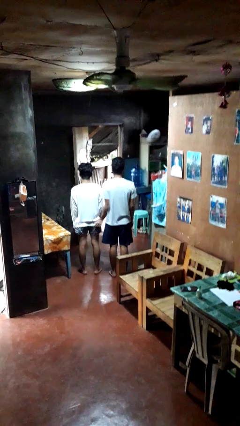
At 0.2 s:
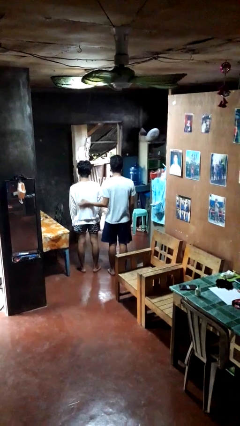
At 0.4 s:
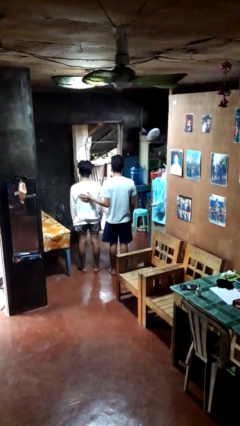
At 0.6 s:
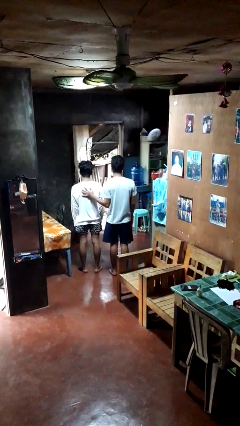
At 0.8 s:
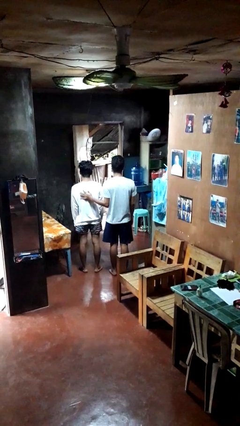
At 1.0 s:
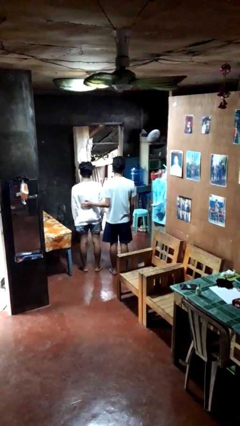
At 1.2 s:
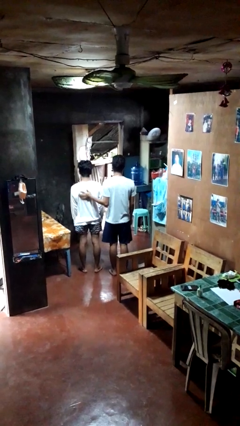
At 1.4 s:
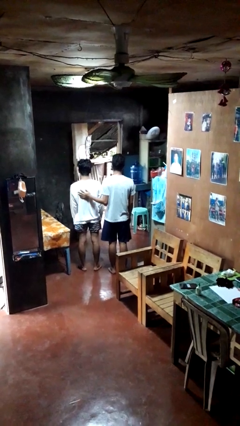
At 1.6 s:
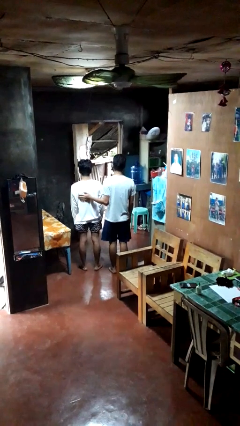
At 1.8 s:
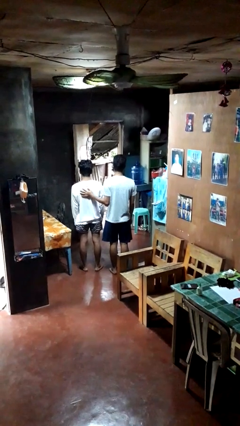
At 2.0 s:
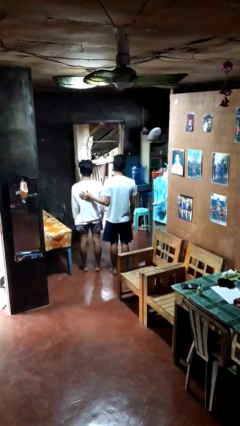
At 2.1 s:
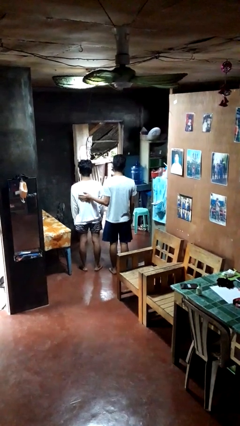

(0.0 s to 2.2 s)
person touches back of person

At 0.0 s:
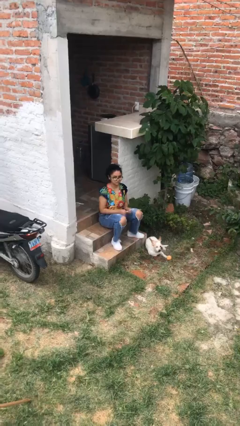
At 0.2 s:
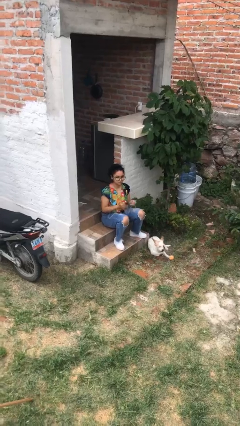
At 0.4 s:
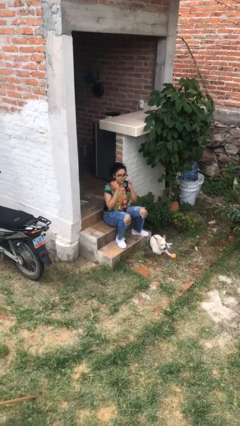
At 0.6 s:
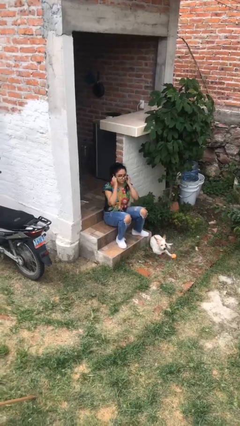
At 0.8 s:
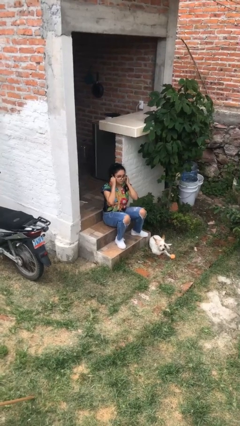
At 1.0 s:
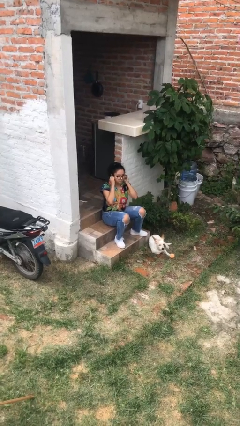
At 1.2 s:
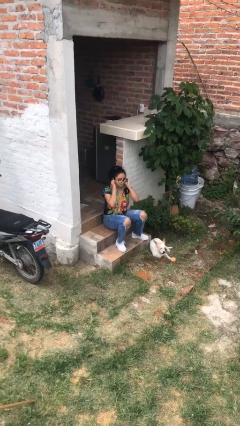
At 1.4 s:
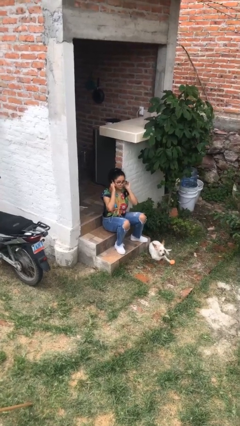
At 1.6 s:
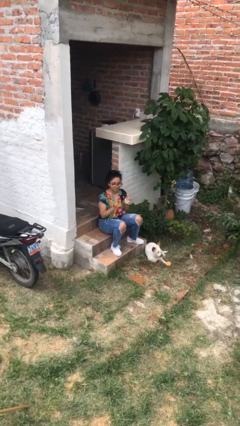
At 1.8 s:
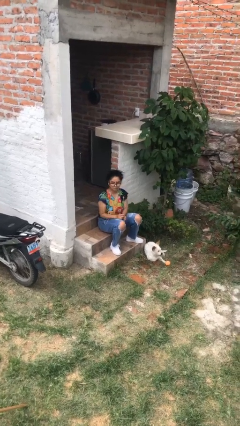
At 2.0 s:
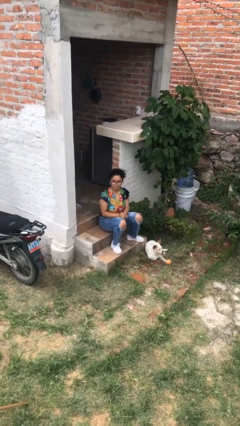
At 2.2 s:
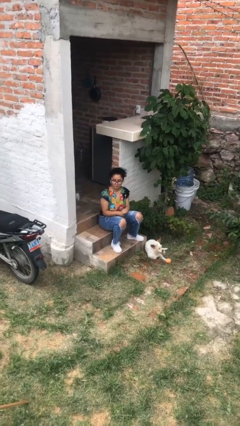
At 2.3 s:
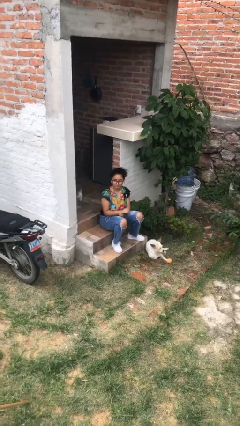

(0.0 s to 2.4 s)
person puts on headphones

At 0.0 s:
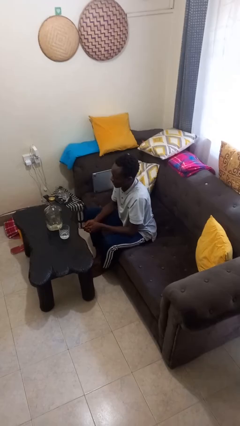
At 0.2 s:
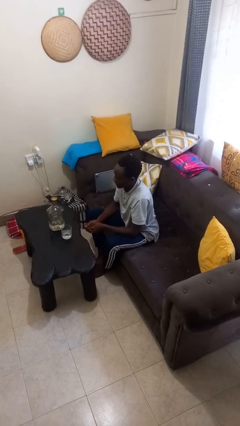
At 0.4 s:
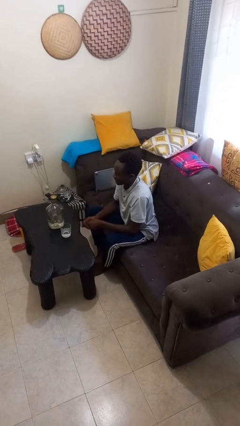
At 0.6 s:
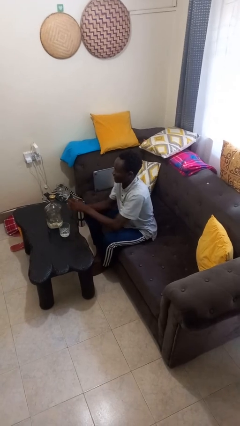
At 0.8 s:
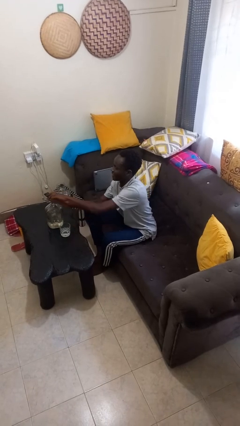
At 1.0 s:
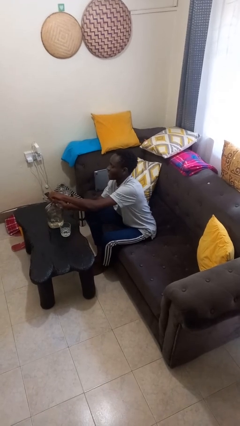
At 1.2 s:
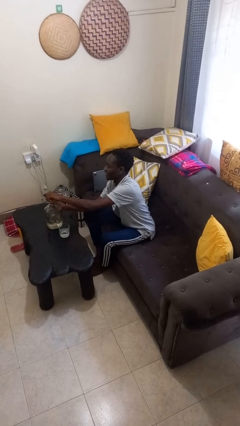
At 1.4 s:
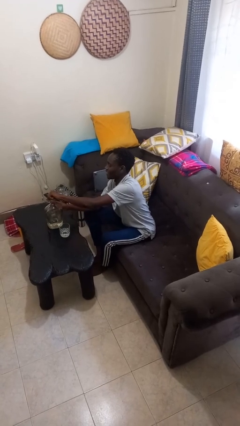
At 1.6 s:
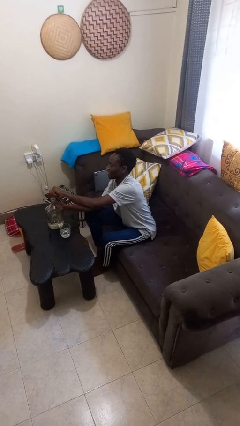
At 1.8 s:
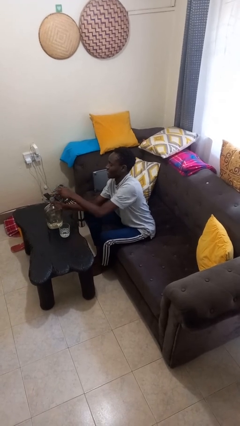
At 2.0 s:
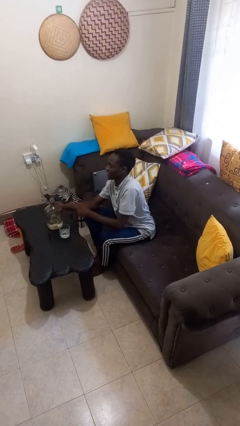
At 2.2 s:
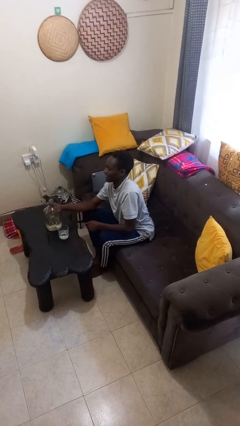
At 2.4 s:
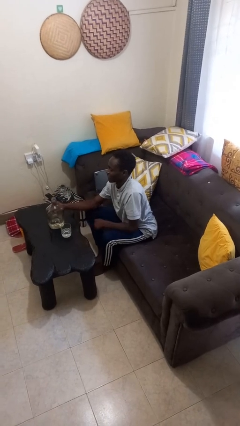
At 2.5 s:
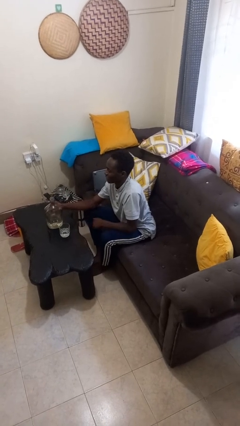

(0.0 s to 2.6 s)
person unscrews lid from bottle

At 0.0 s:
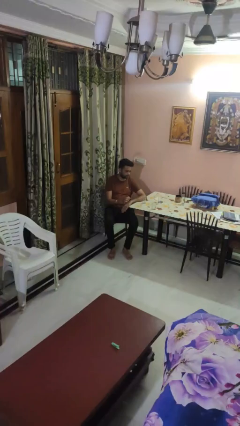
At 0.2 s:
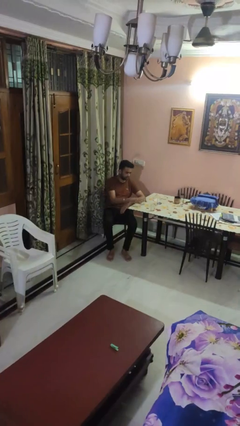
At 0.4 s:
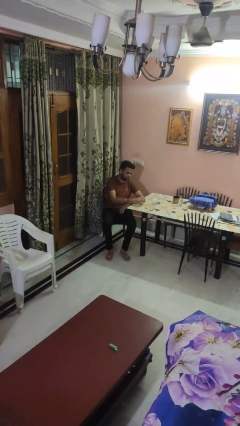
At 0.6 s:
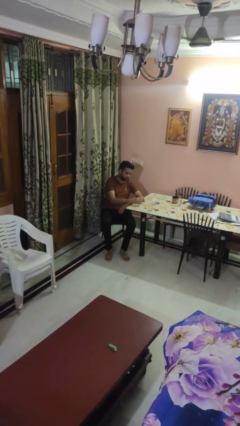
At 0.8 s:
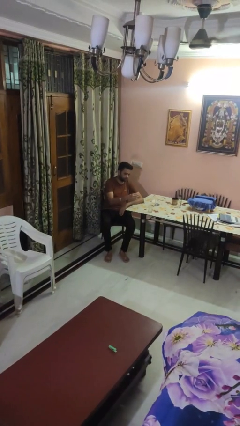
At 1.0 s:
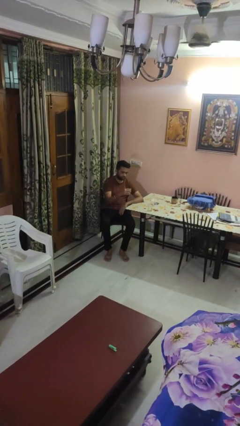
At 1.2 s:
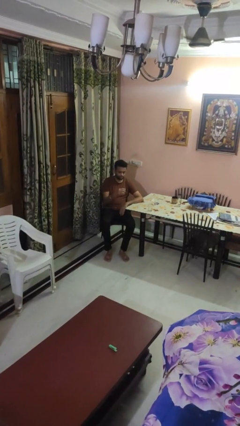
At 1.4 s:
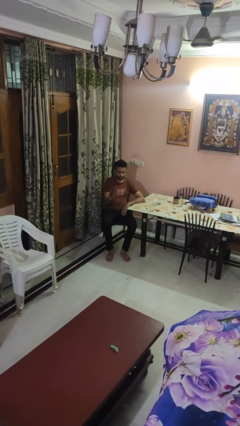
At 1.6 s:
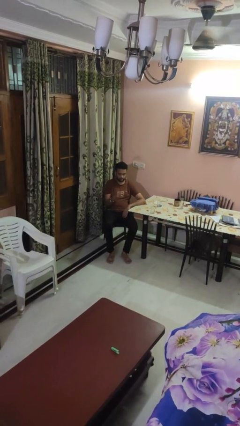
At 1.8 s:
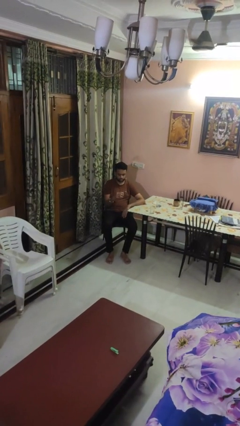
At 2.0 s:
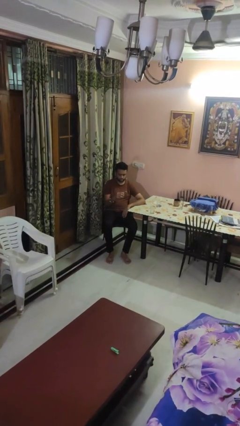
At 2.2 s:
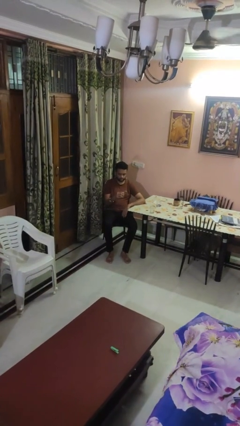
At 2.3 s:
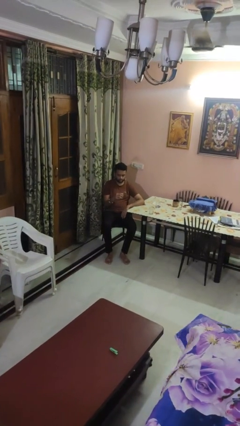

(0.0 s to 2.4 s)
person picks up object from table

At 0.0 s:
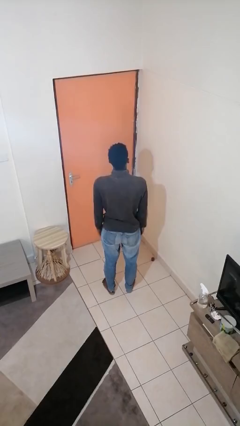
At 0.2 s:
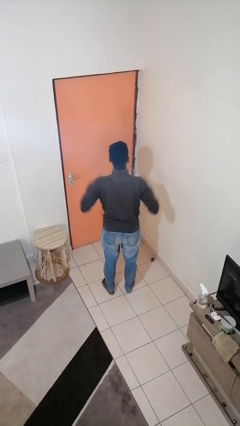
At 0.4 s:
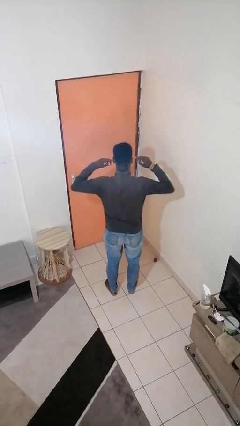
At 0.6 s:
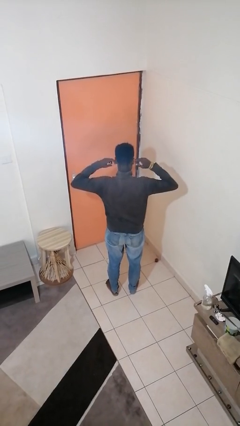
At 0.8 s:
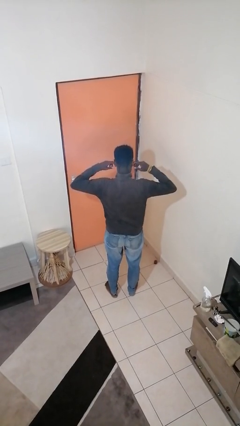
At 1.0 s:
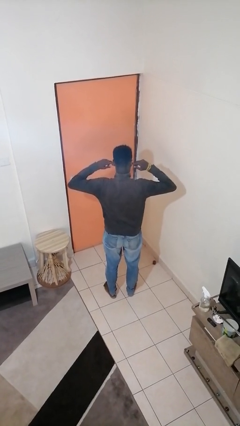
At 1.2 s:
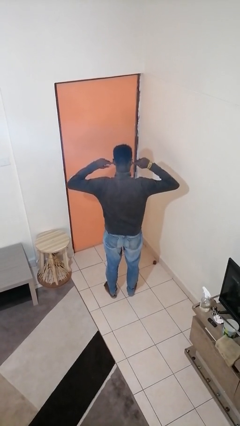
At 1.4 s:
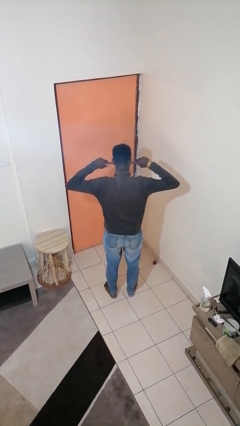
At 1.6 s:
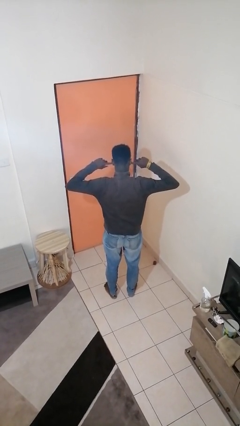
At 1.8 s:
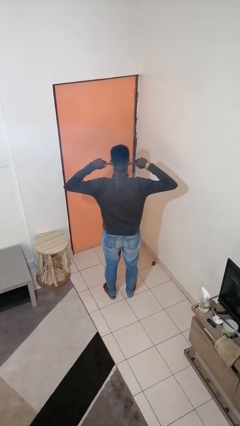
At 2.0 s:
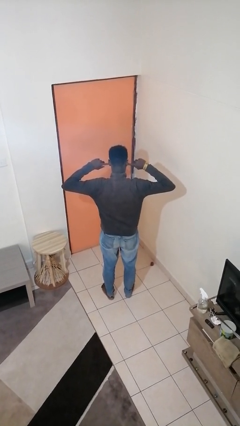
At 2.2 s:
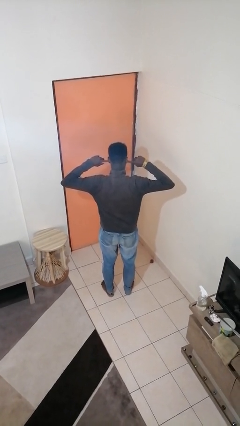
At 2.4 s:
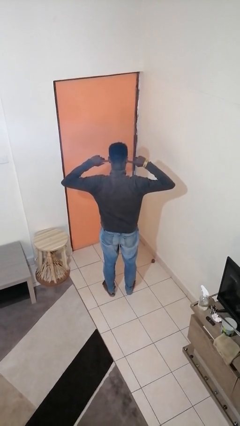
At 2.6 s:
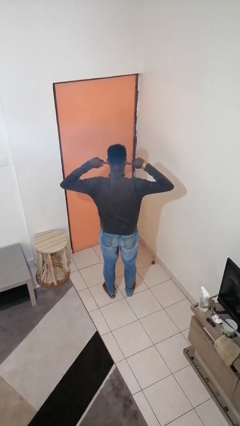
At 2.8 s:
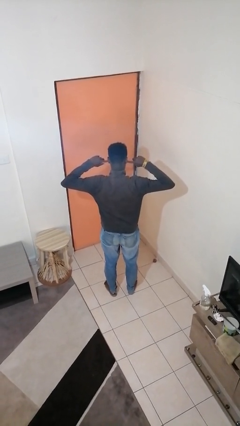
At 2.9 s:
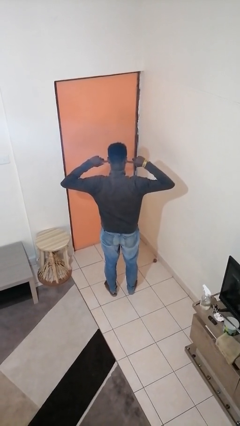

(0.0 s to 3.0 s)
person puts fingers in ear

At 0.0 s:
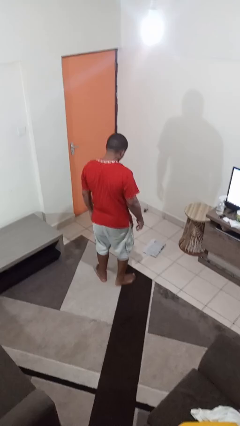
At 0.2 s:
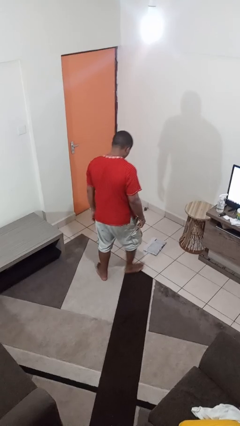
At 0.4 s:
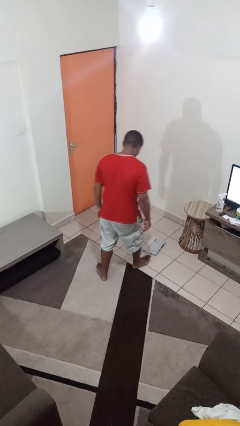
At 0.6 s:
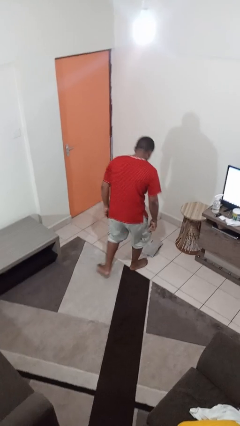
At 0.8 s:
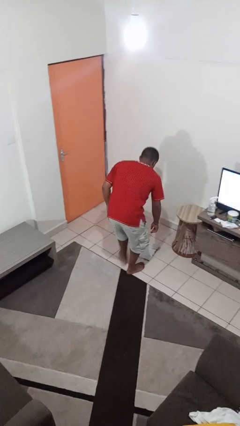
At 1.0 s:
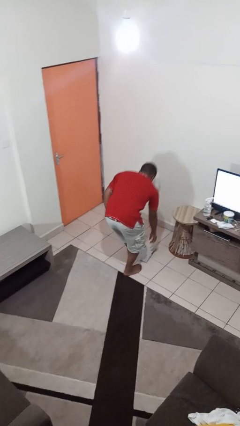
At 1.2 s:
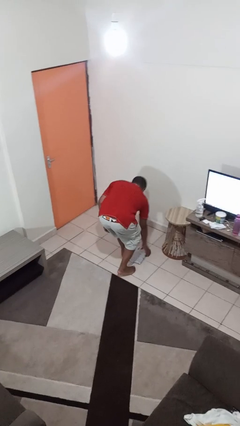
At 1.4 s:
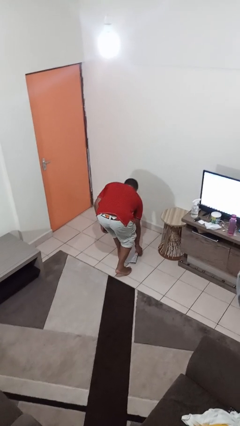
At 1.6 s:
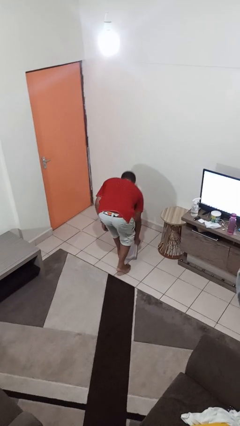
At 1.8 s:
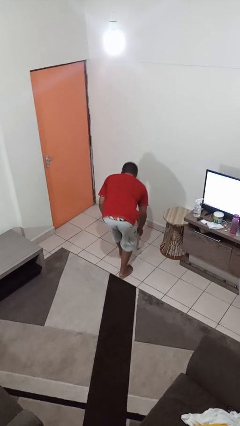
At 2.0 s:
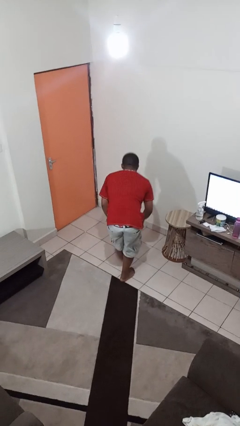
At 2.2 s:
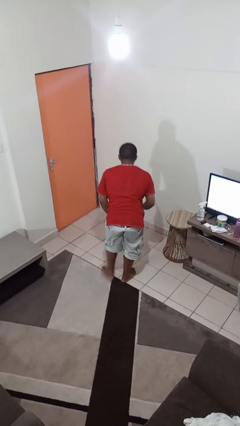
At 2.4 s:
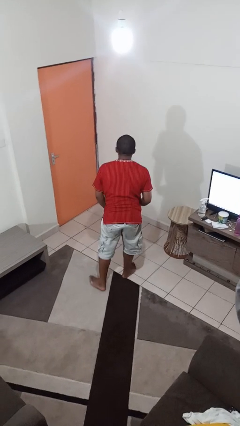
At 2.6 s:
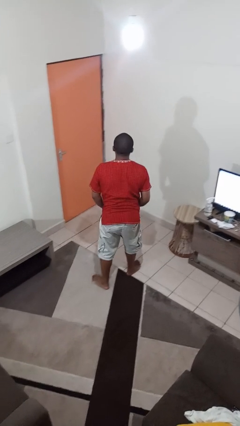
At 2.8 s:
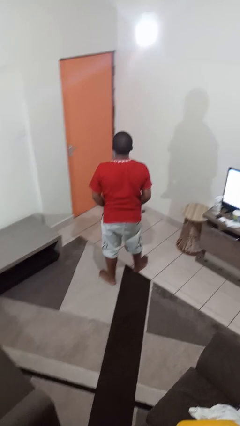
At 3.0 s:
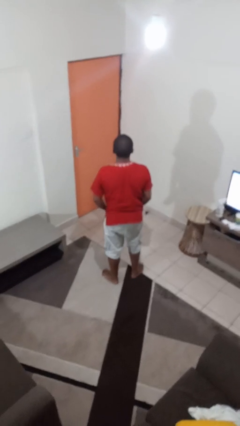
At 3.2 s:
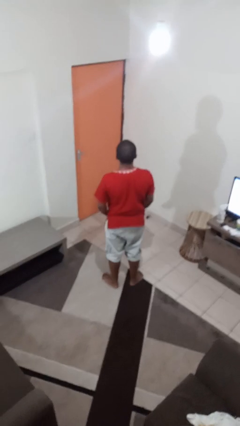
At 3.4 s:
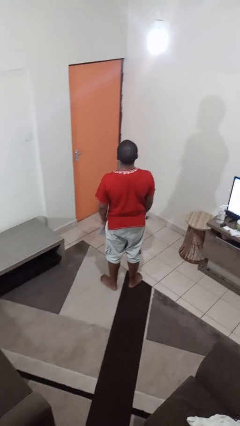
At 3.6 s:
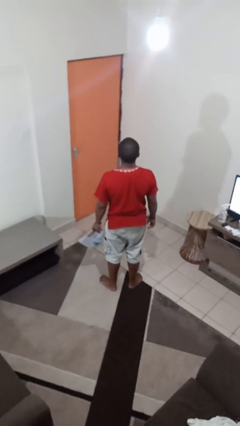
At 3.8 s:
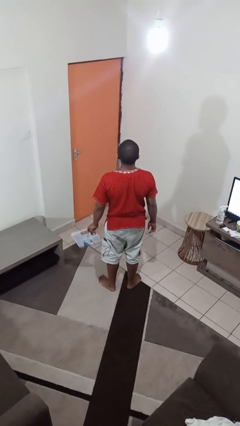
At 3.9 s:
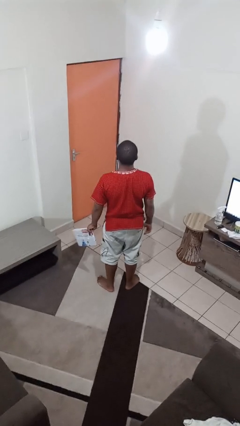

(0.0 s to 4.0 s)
person picks up object from floor

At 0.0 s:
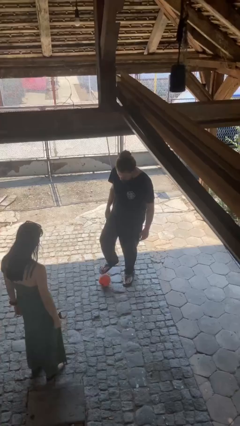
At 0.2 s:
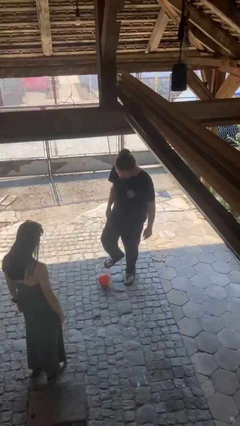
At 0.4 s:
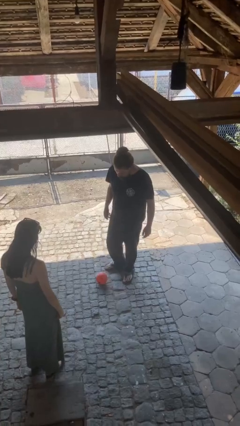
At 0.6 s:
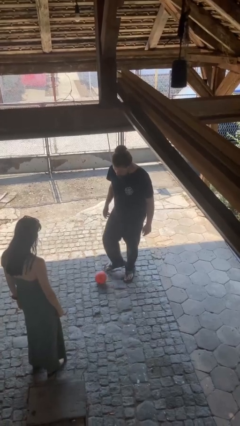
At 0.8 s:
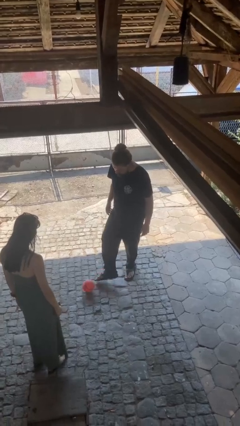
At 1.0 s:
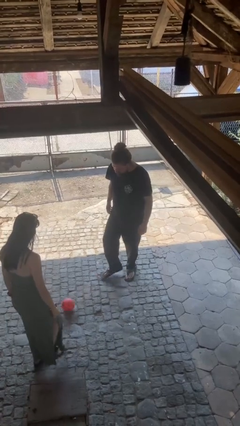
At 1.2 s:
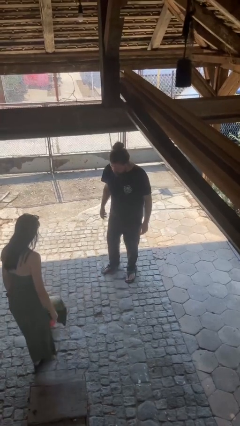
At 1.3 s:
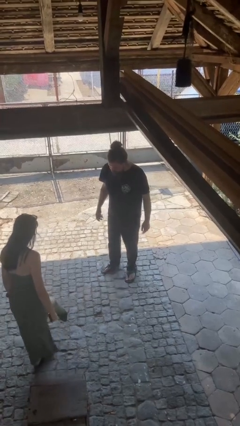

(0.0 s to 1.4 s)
person kicks object to person
